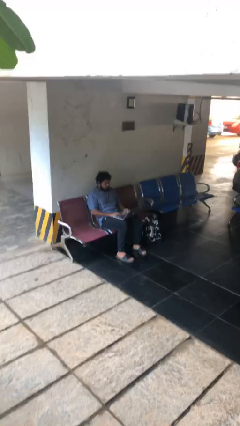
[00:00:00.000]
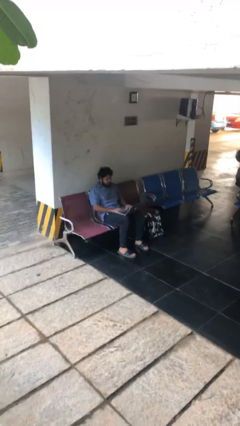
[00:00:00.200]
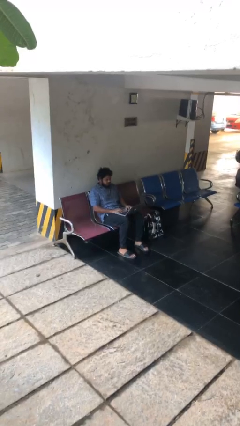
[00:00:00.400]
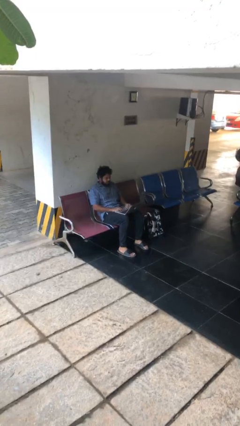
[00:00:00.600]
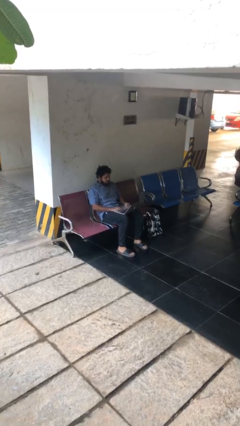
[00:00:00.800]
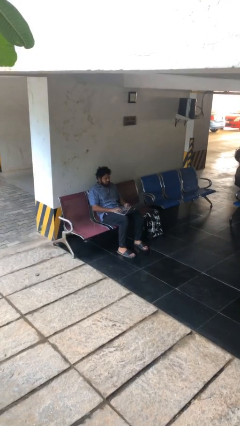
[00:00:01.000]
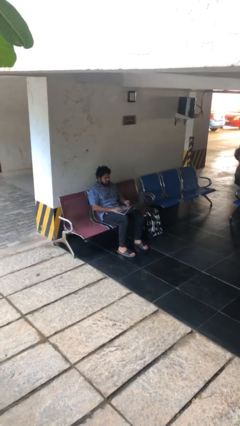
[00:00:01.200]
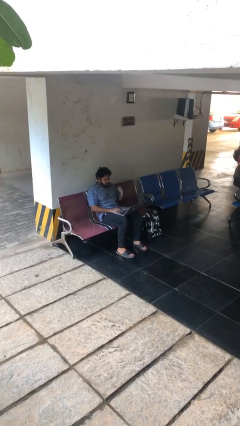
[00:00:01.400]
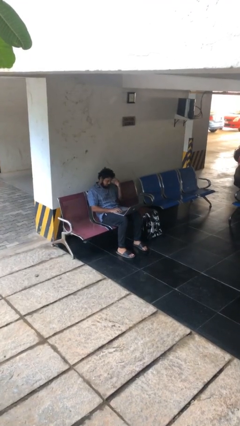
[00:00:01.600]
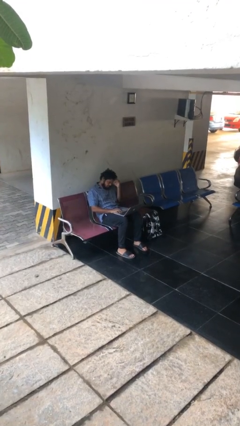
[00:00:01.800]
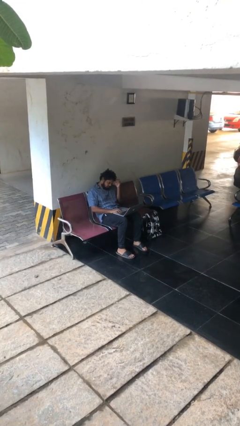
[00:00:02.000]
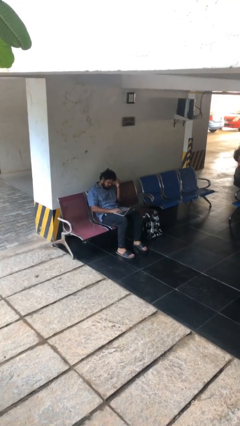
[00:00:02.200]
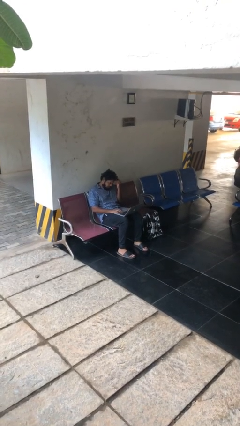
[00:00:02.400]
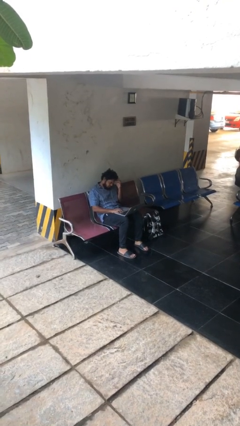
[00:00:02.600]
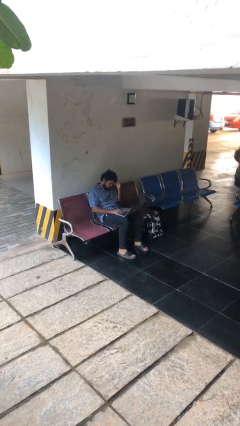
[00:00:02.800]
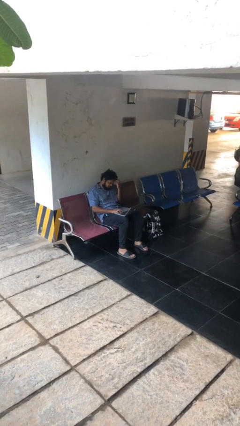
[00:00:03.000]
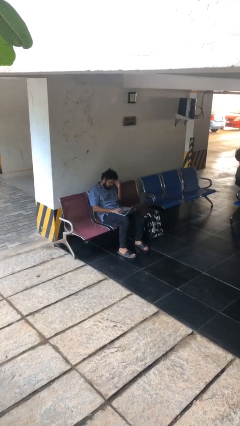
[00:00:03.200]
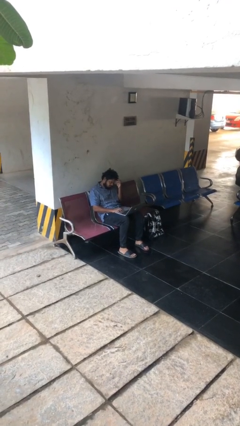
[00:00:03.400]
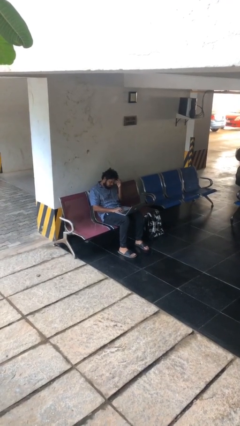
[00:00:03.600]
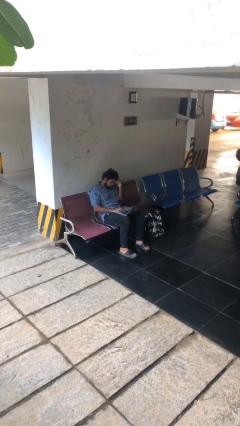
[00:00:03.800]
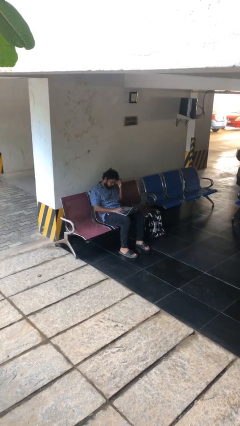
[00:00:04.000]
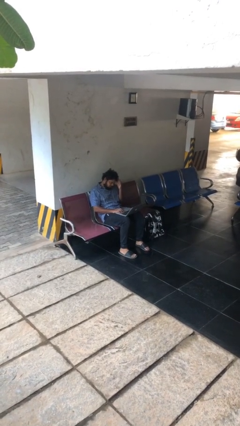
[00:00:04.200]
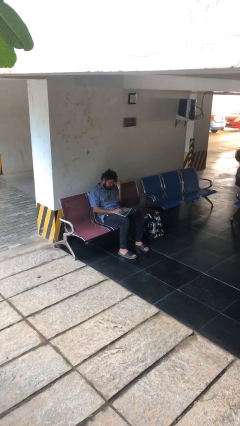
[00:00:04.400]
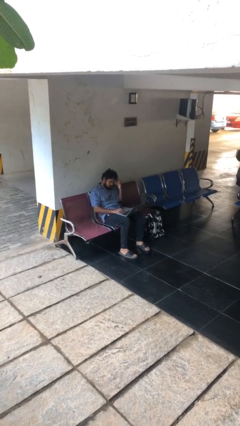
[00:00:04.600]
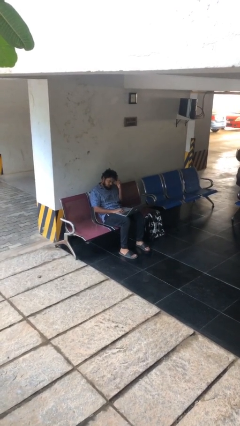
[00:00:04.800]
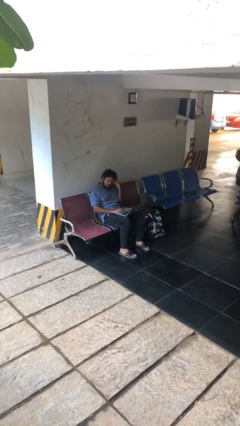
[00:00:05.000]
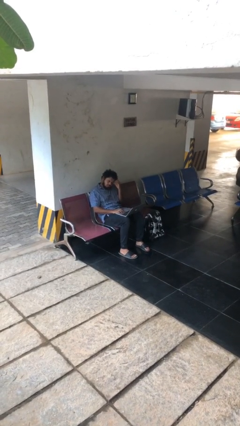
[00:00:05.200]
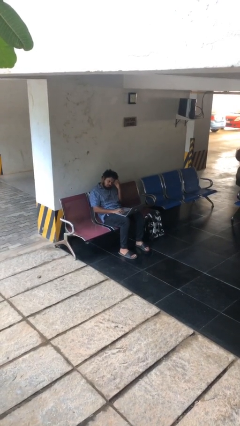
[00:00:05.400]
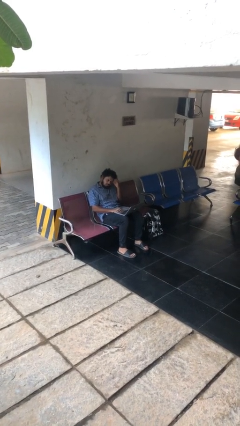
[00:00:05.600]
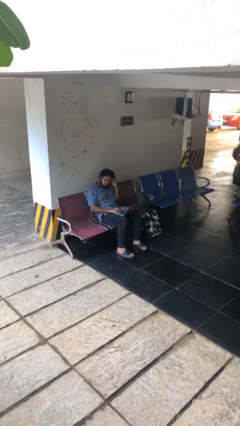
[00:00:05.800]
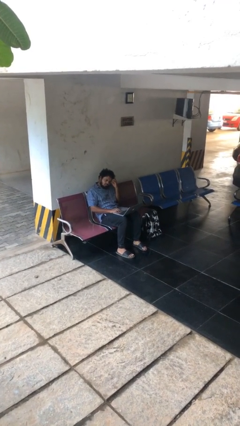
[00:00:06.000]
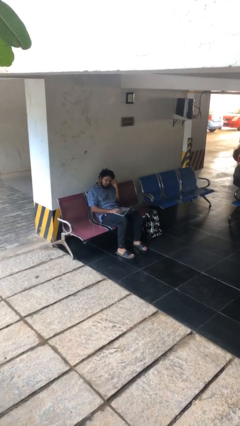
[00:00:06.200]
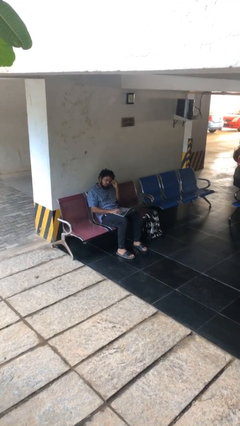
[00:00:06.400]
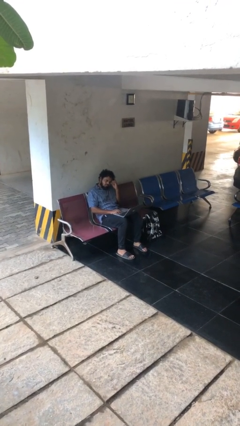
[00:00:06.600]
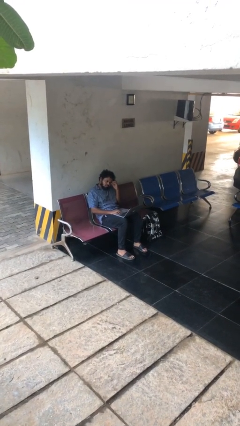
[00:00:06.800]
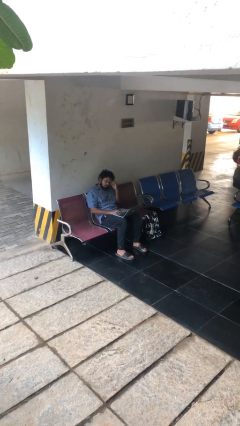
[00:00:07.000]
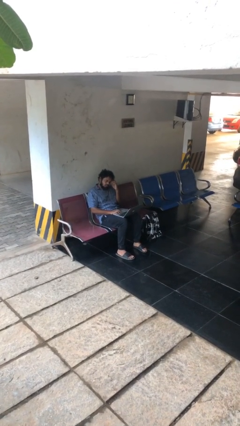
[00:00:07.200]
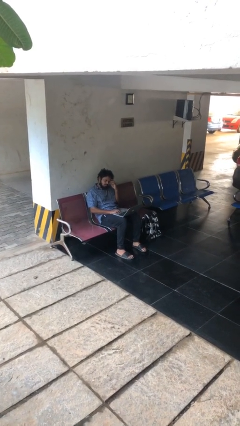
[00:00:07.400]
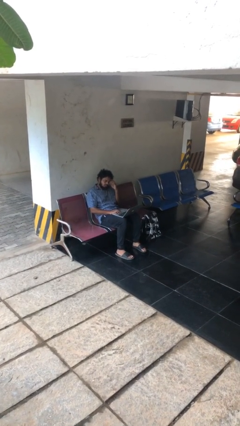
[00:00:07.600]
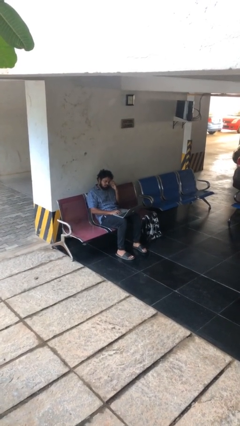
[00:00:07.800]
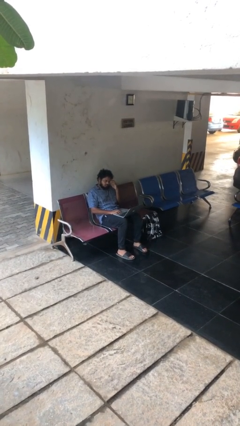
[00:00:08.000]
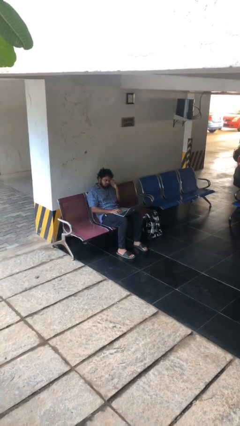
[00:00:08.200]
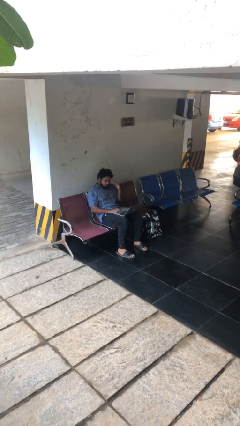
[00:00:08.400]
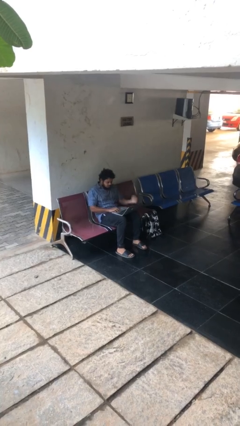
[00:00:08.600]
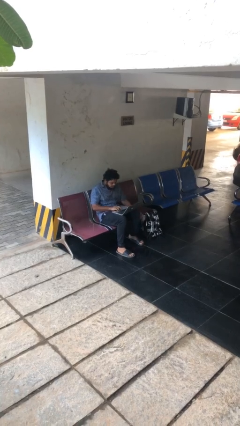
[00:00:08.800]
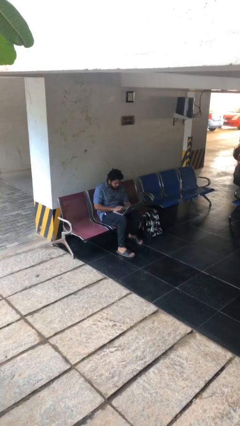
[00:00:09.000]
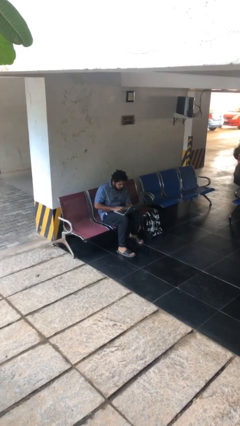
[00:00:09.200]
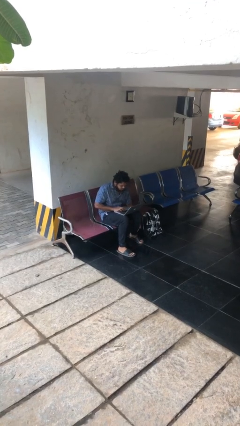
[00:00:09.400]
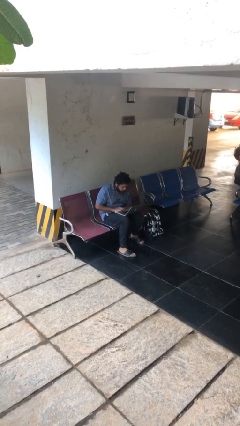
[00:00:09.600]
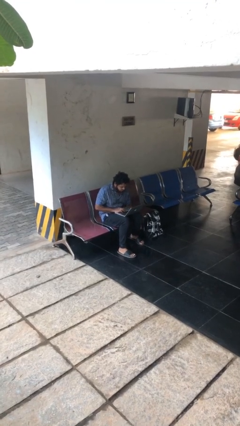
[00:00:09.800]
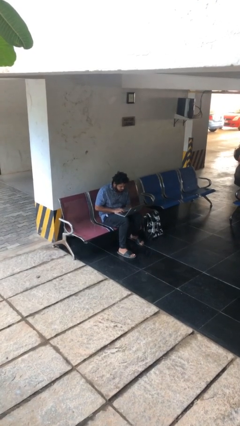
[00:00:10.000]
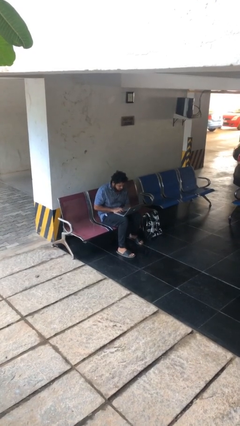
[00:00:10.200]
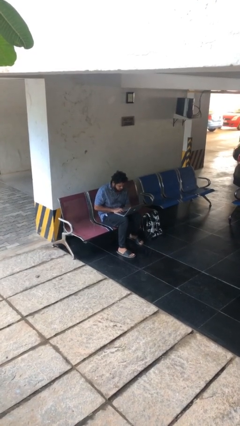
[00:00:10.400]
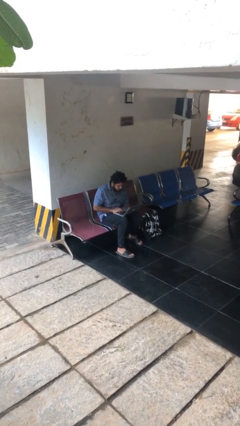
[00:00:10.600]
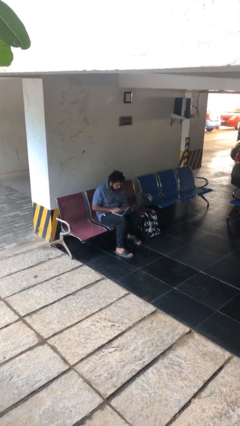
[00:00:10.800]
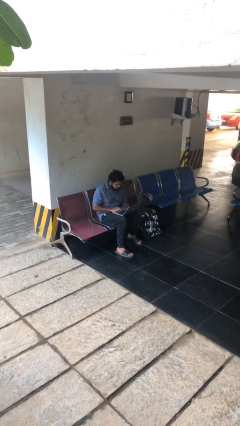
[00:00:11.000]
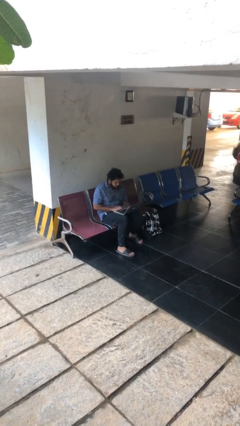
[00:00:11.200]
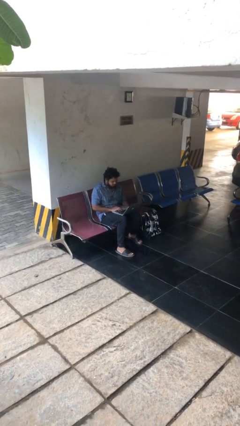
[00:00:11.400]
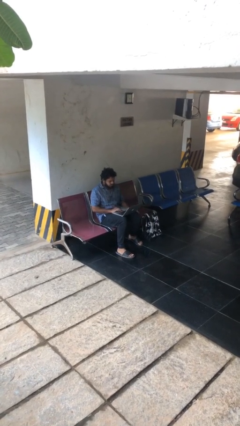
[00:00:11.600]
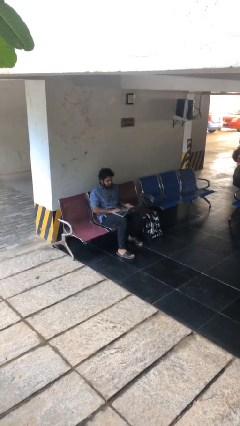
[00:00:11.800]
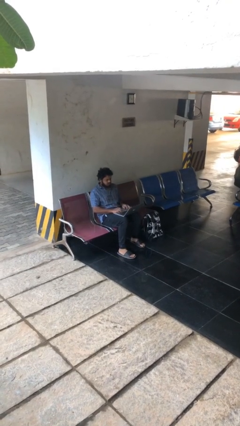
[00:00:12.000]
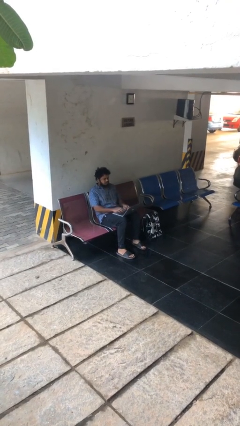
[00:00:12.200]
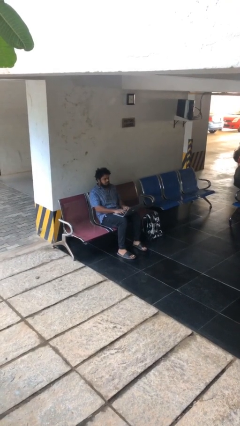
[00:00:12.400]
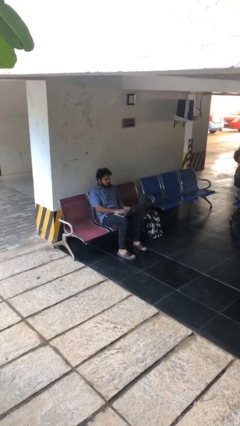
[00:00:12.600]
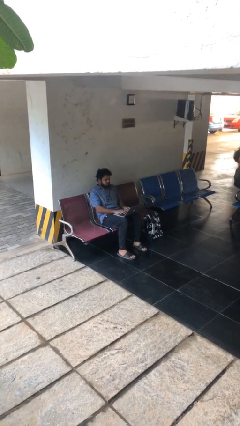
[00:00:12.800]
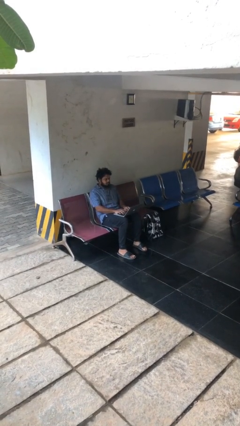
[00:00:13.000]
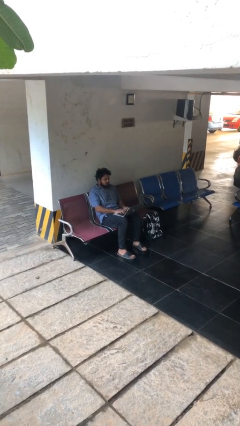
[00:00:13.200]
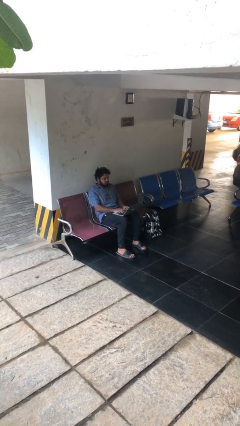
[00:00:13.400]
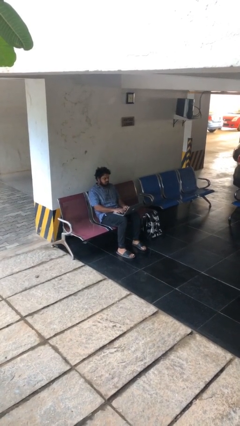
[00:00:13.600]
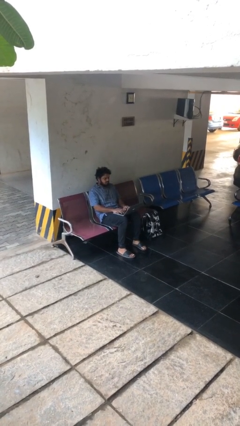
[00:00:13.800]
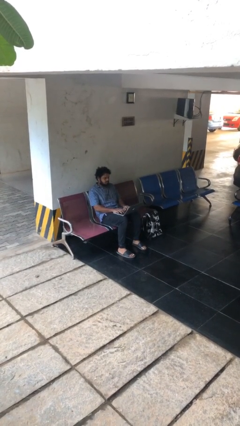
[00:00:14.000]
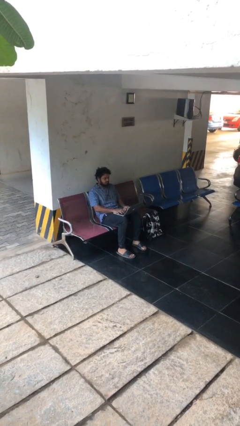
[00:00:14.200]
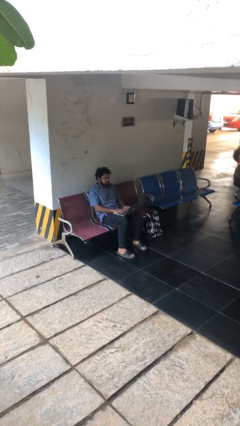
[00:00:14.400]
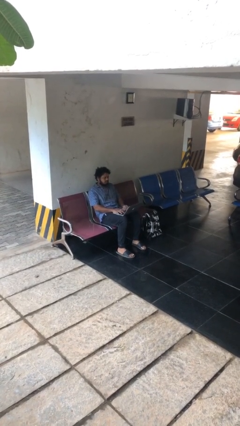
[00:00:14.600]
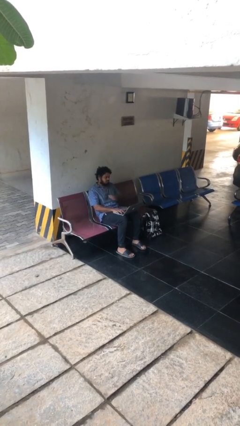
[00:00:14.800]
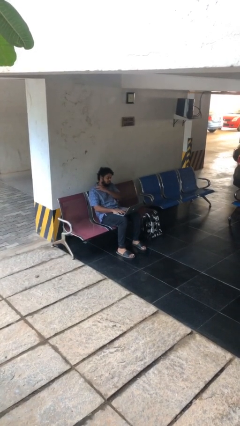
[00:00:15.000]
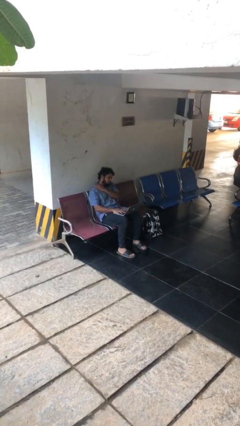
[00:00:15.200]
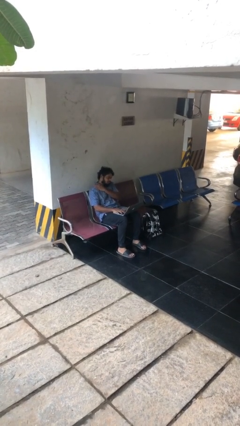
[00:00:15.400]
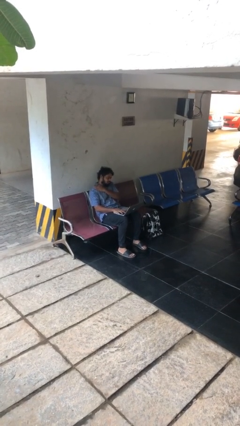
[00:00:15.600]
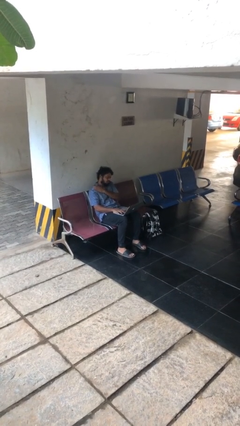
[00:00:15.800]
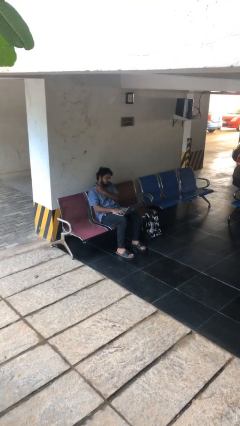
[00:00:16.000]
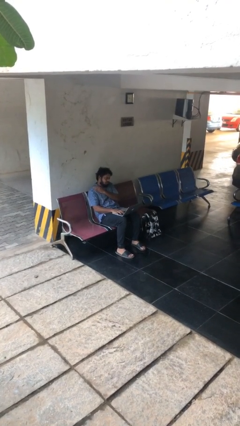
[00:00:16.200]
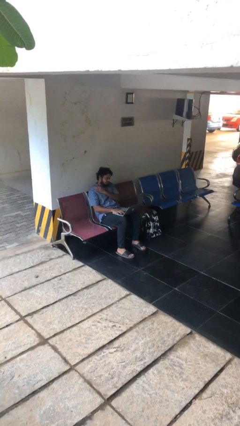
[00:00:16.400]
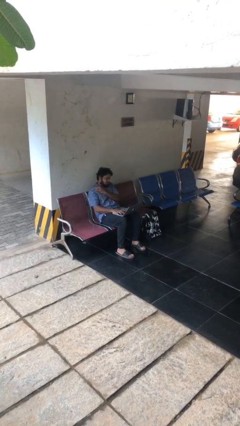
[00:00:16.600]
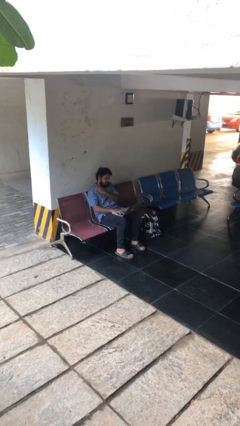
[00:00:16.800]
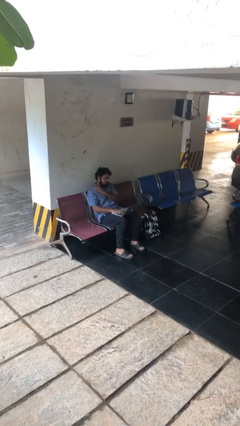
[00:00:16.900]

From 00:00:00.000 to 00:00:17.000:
person interacts with laptop

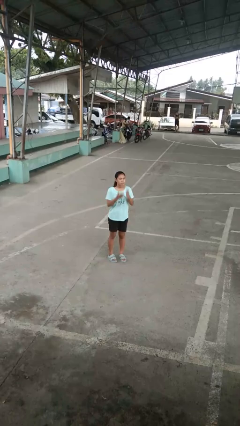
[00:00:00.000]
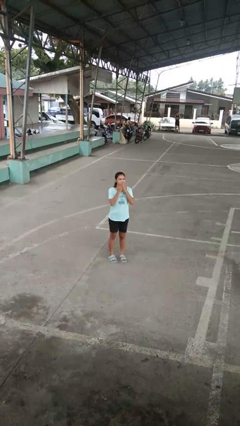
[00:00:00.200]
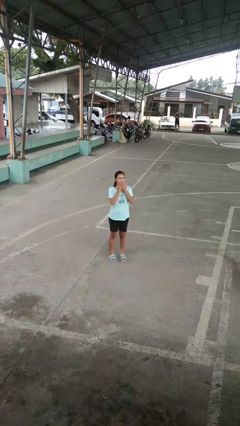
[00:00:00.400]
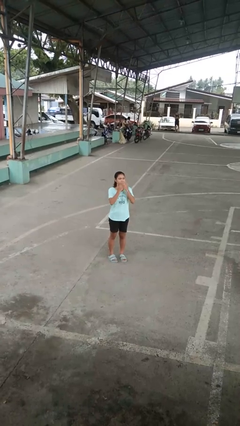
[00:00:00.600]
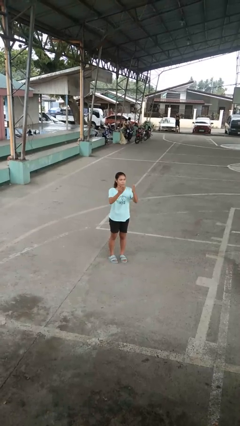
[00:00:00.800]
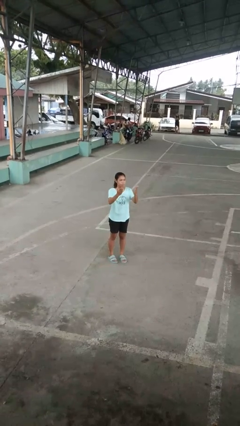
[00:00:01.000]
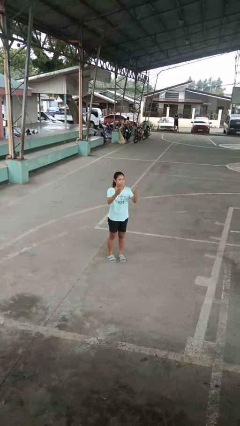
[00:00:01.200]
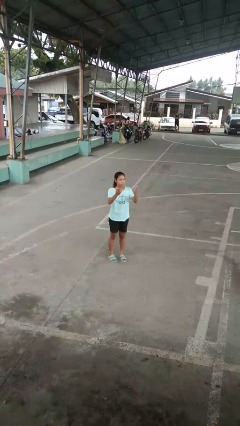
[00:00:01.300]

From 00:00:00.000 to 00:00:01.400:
person gestures blow kiss
